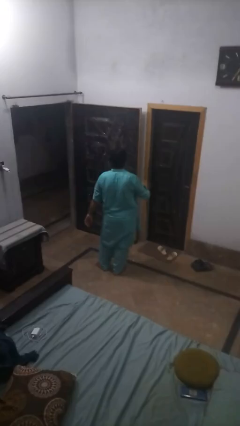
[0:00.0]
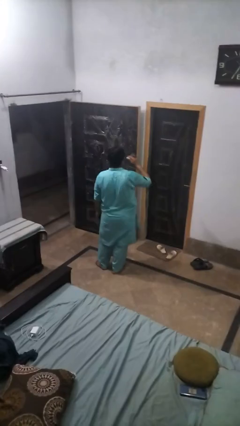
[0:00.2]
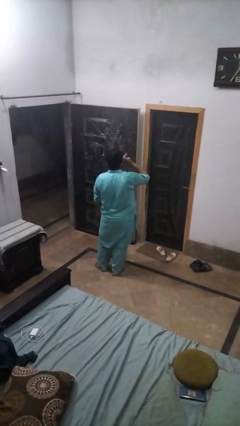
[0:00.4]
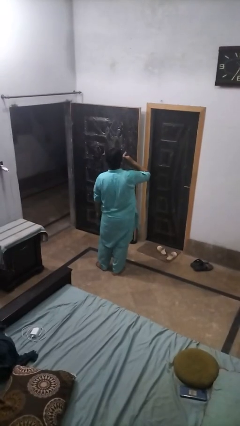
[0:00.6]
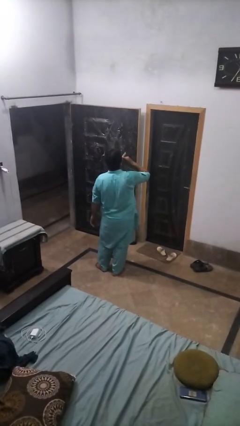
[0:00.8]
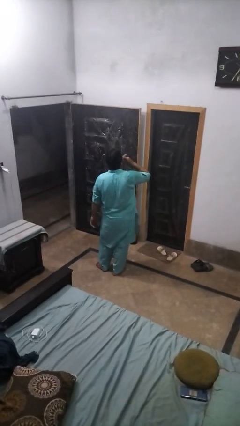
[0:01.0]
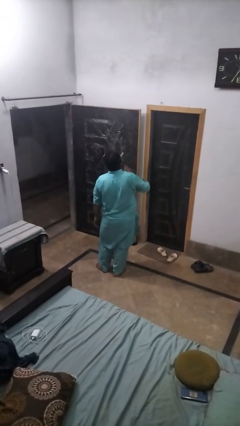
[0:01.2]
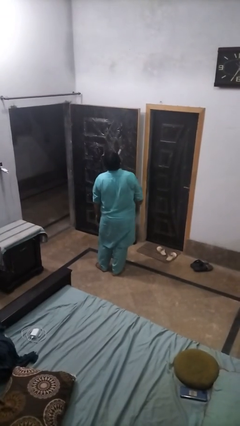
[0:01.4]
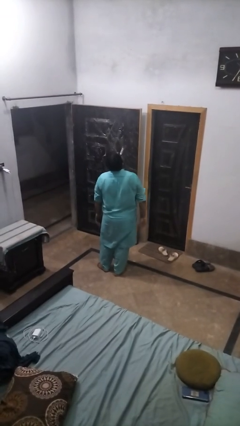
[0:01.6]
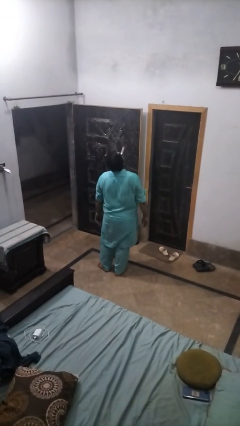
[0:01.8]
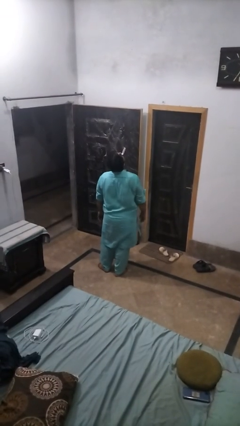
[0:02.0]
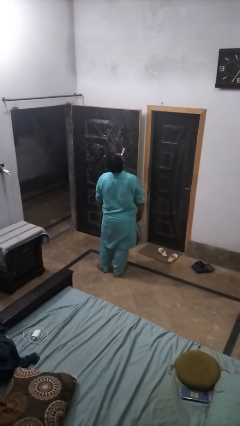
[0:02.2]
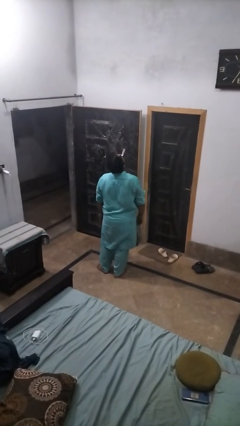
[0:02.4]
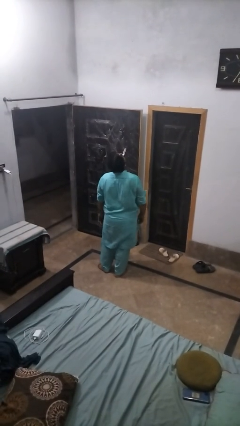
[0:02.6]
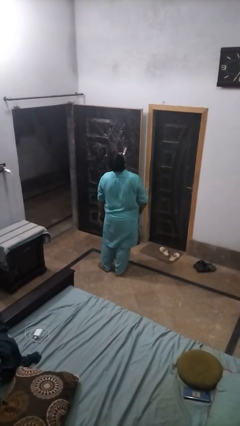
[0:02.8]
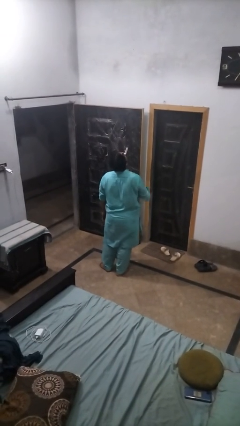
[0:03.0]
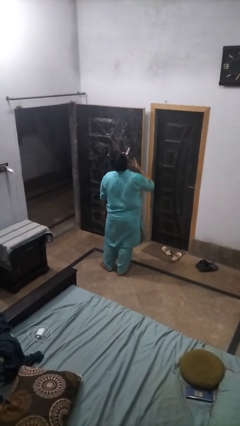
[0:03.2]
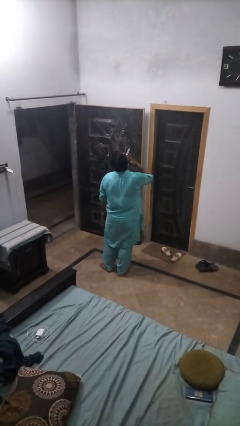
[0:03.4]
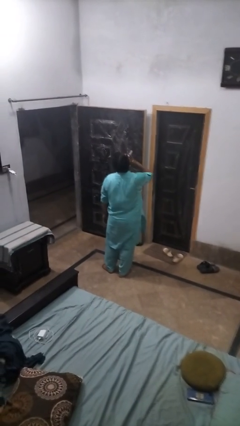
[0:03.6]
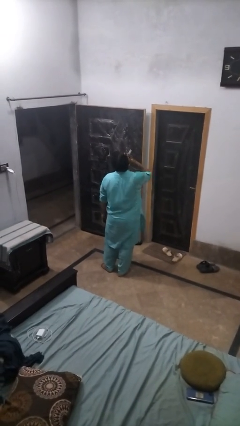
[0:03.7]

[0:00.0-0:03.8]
person vapes

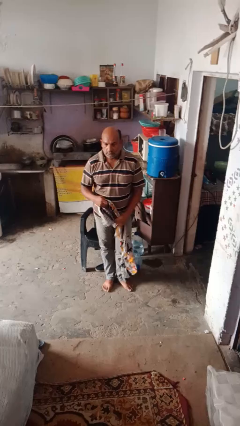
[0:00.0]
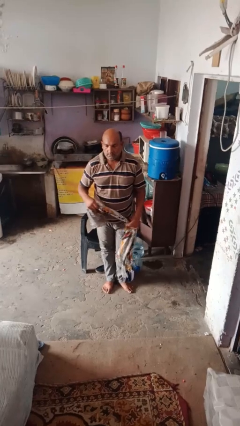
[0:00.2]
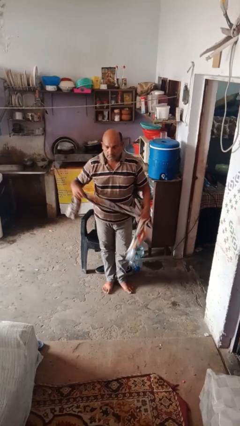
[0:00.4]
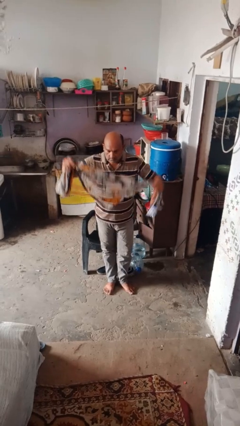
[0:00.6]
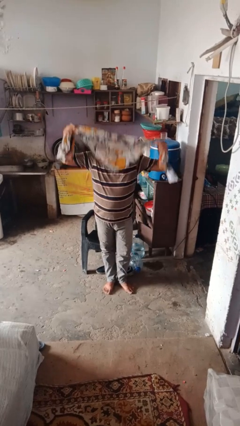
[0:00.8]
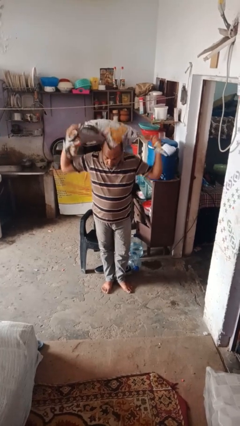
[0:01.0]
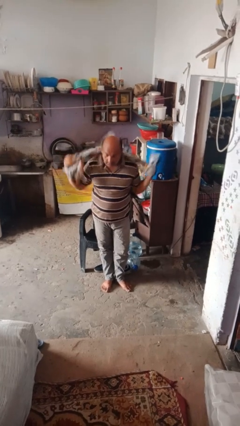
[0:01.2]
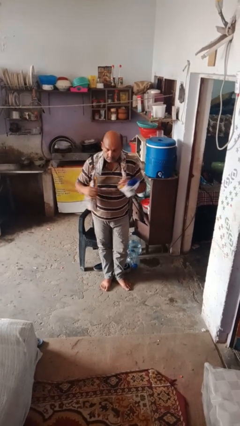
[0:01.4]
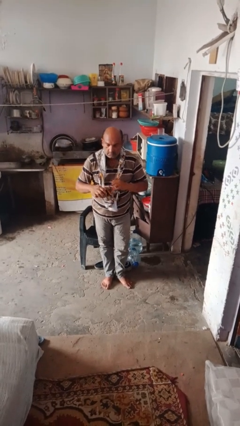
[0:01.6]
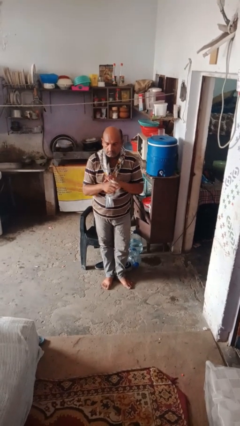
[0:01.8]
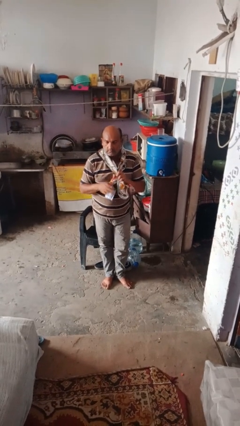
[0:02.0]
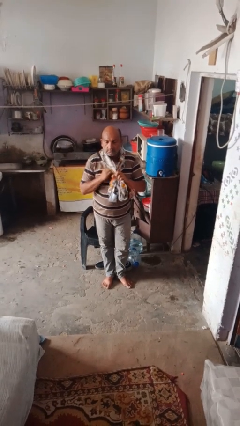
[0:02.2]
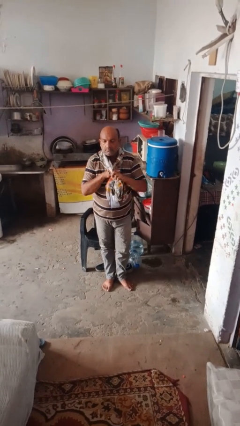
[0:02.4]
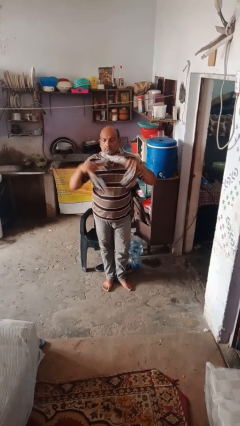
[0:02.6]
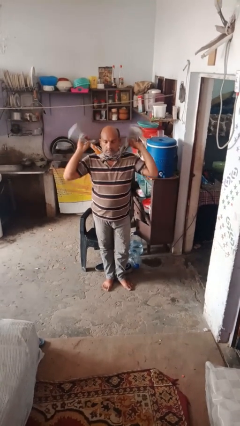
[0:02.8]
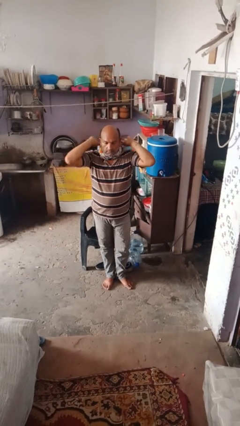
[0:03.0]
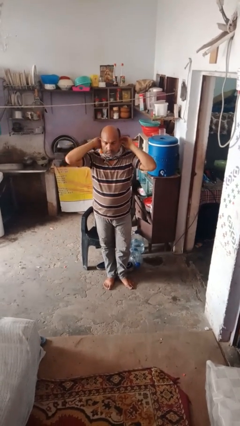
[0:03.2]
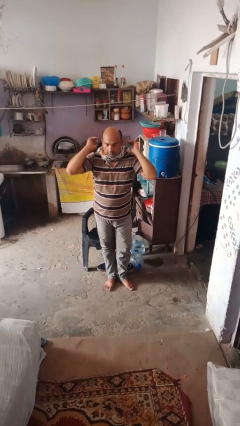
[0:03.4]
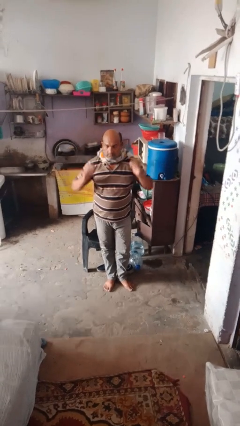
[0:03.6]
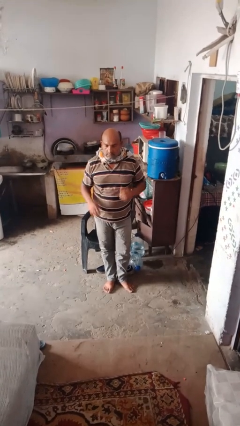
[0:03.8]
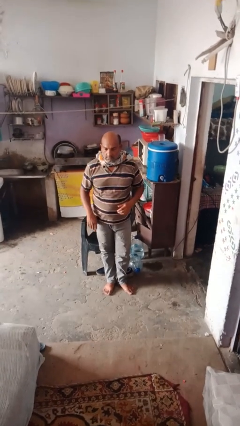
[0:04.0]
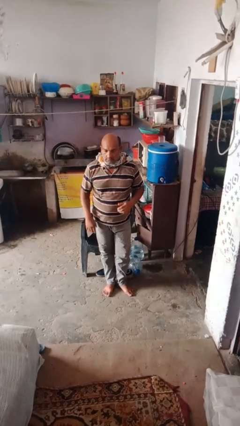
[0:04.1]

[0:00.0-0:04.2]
person puts on scarf

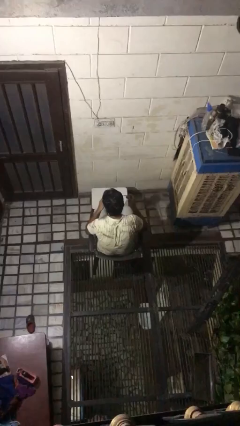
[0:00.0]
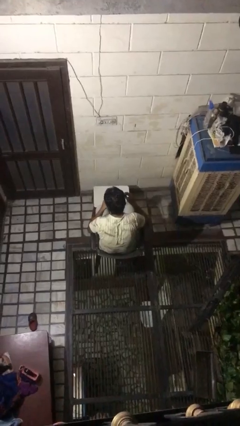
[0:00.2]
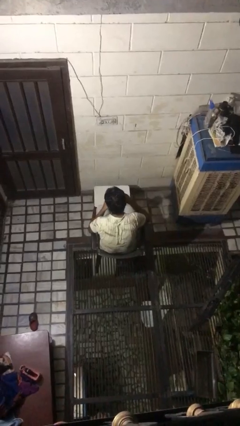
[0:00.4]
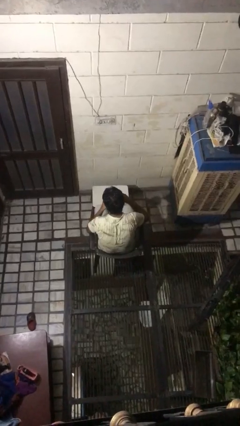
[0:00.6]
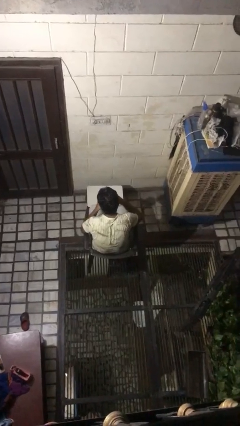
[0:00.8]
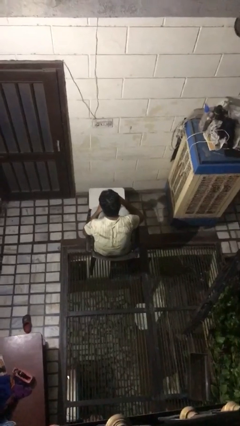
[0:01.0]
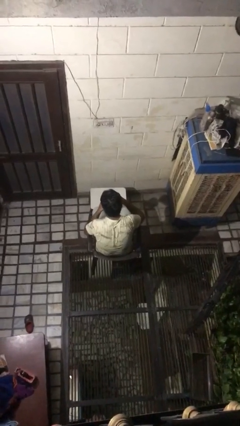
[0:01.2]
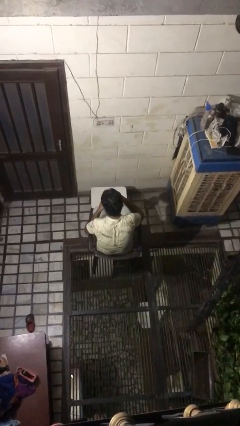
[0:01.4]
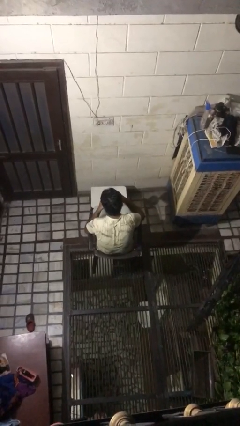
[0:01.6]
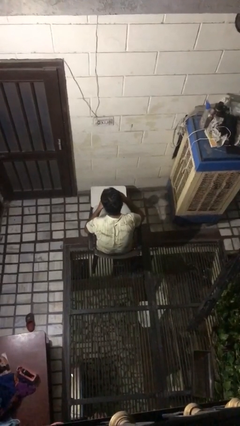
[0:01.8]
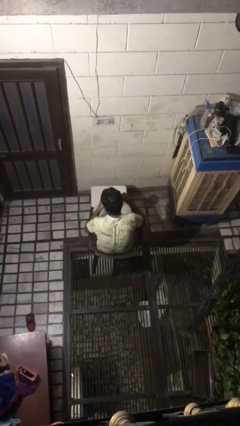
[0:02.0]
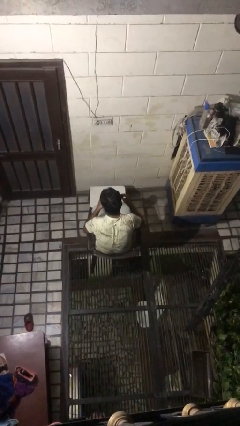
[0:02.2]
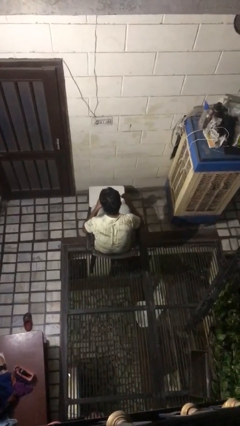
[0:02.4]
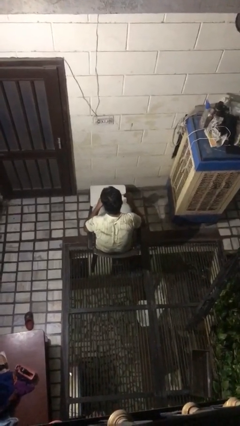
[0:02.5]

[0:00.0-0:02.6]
person stirs mug

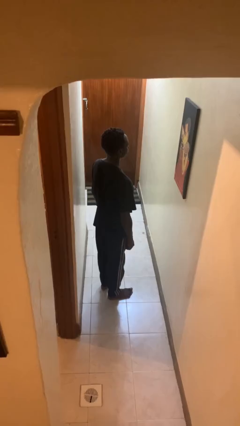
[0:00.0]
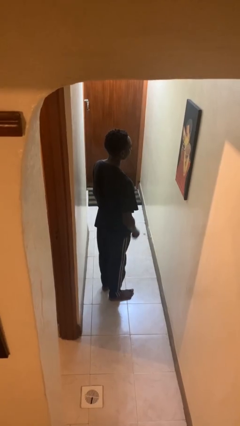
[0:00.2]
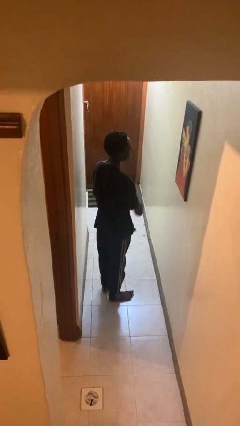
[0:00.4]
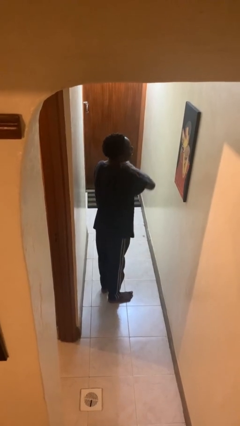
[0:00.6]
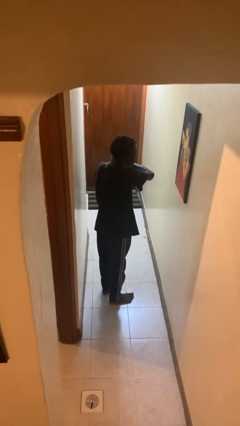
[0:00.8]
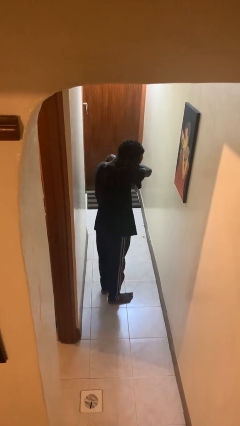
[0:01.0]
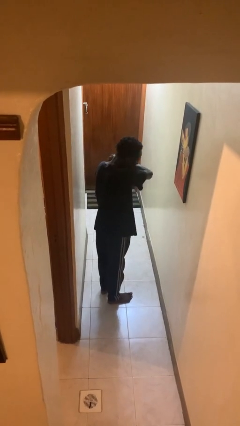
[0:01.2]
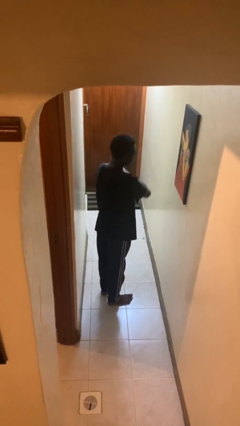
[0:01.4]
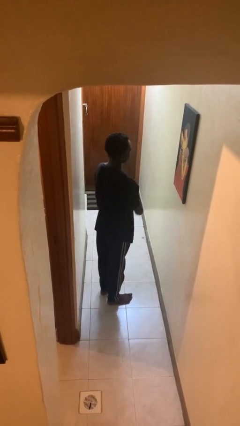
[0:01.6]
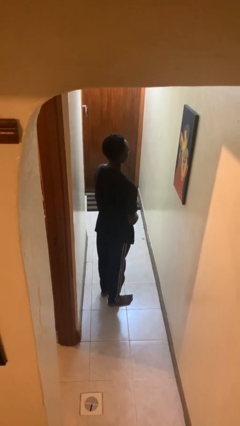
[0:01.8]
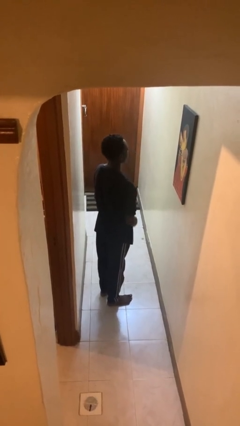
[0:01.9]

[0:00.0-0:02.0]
person sneezes into arm

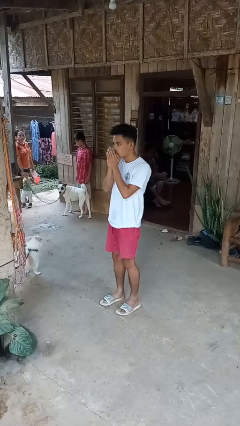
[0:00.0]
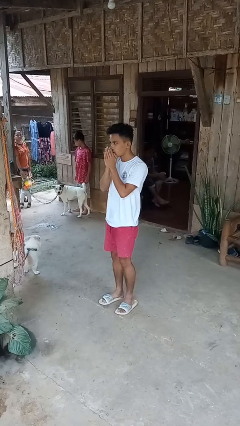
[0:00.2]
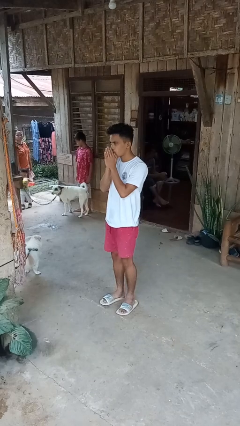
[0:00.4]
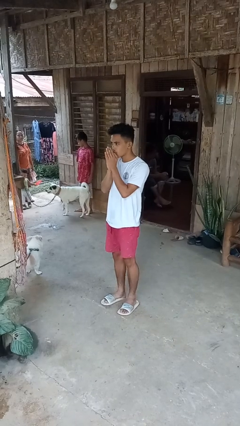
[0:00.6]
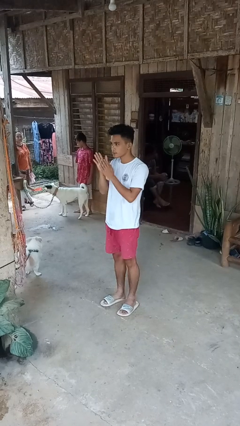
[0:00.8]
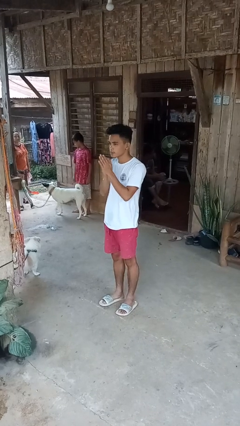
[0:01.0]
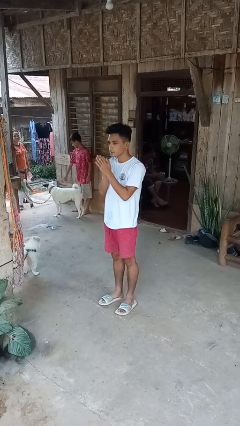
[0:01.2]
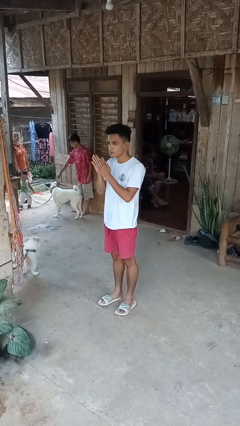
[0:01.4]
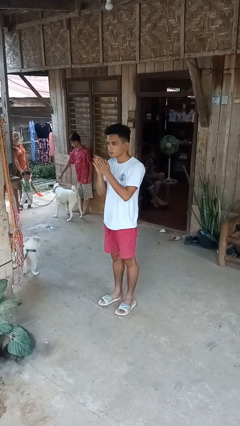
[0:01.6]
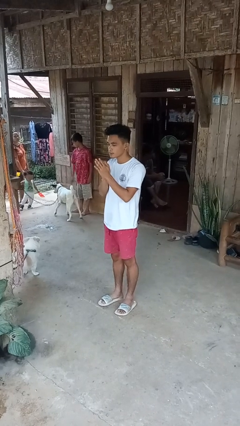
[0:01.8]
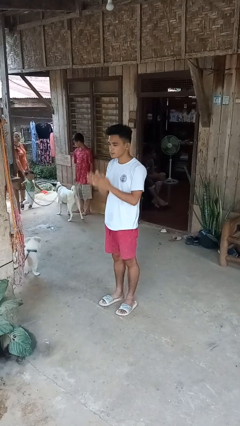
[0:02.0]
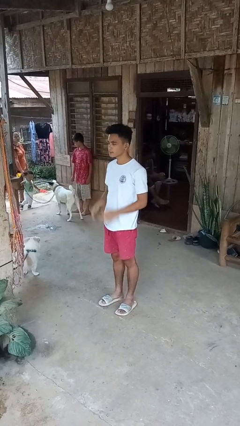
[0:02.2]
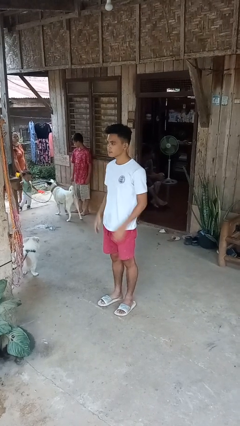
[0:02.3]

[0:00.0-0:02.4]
person blows into hands

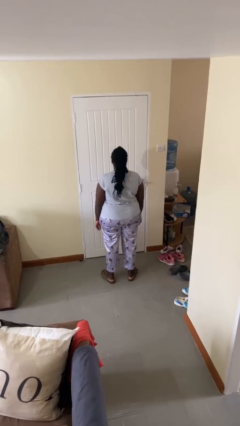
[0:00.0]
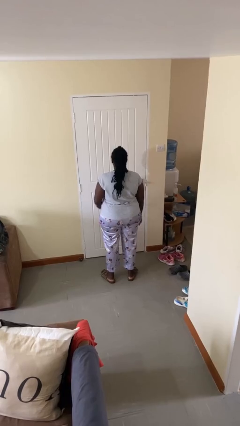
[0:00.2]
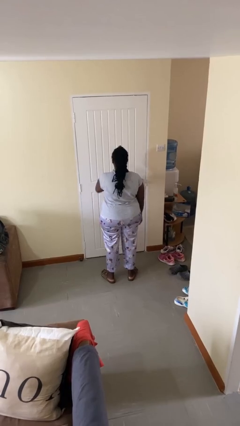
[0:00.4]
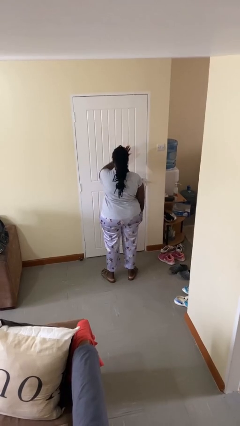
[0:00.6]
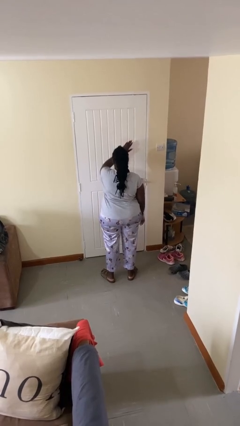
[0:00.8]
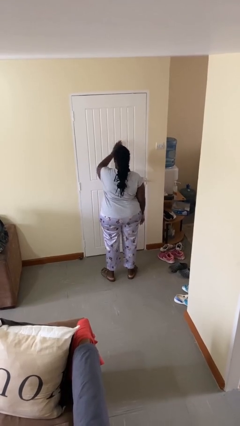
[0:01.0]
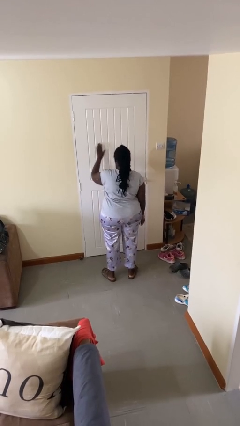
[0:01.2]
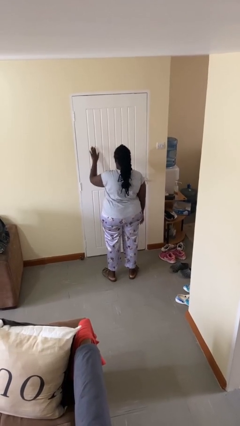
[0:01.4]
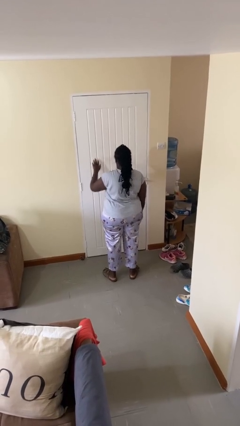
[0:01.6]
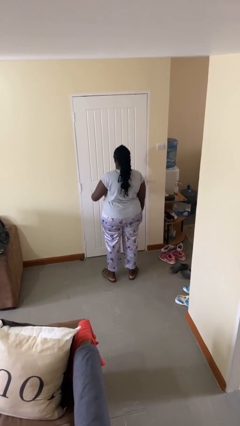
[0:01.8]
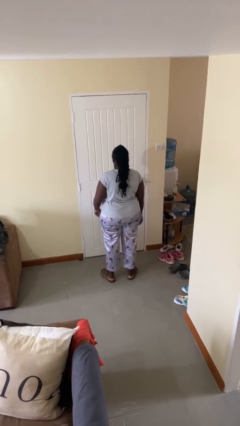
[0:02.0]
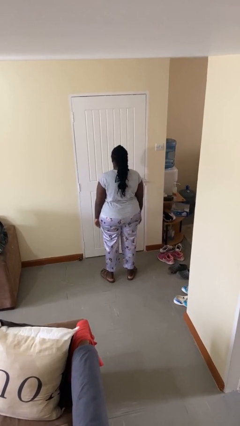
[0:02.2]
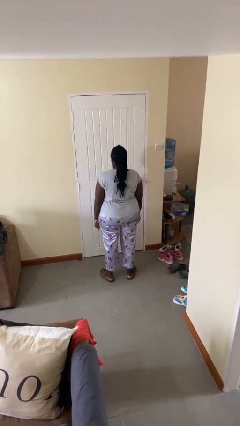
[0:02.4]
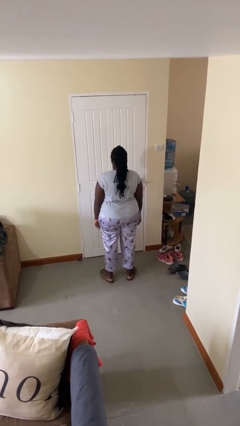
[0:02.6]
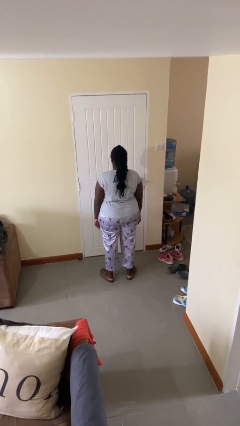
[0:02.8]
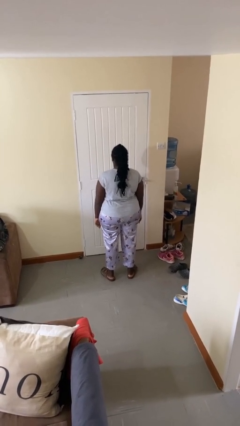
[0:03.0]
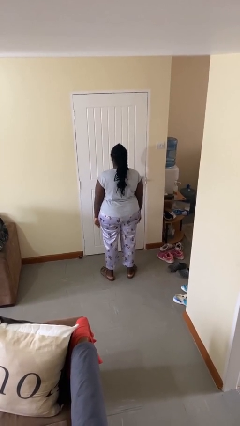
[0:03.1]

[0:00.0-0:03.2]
person gestures swipe left
